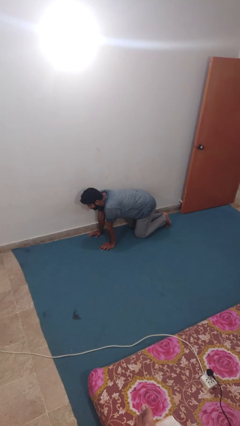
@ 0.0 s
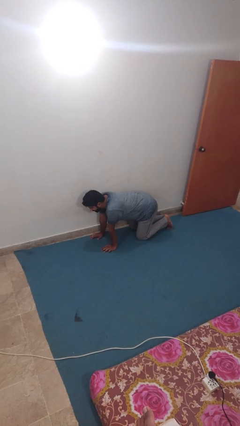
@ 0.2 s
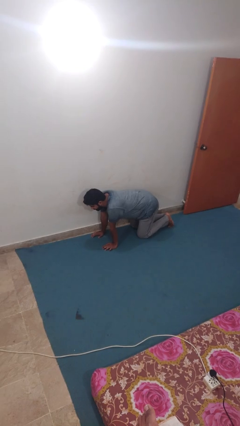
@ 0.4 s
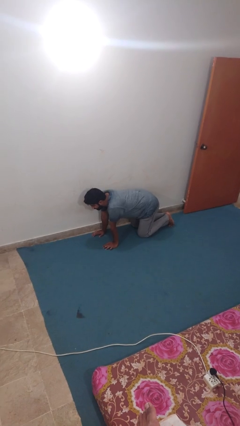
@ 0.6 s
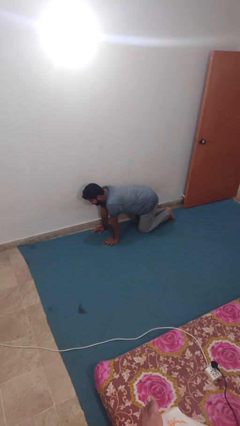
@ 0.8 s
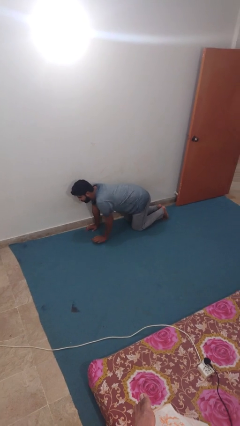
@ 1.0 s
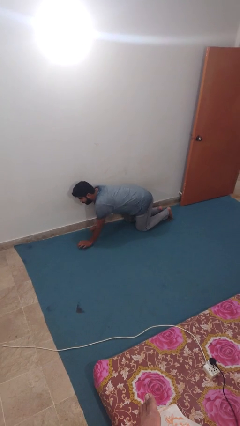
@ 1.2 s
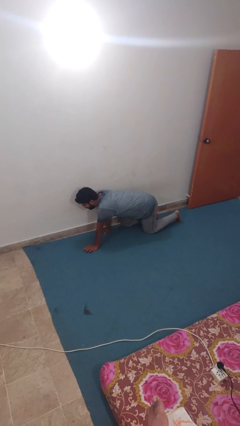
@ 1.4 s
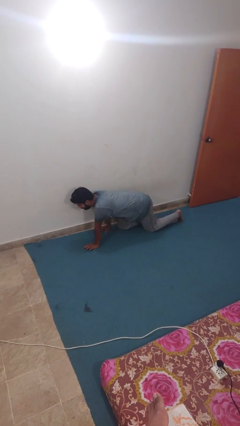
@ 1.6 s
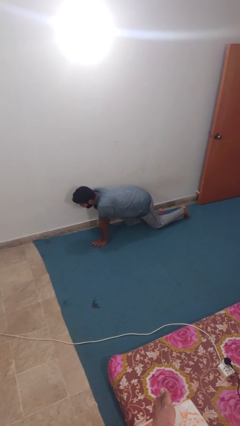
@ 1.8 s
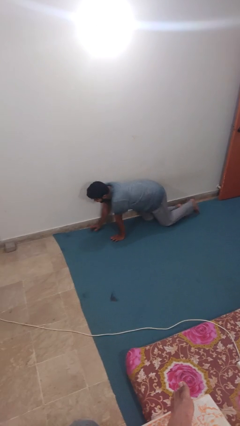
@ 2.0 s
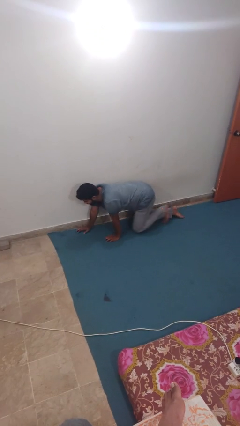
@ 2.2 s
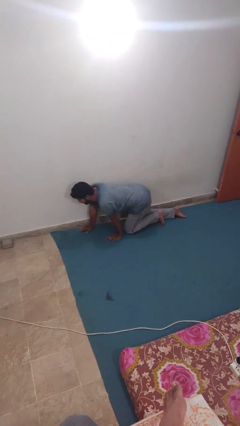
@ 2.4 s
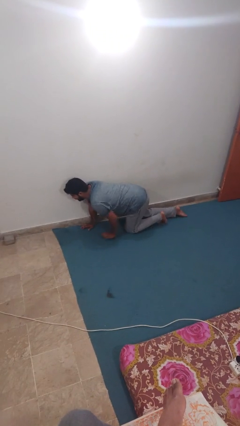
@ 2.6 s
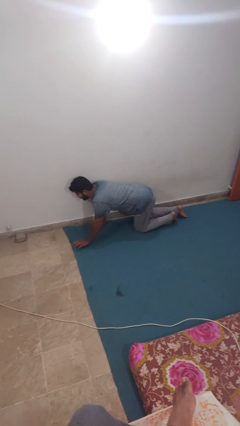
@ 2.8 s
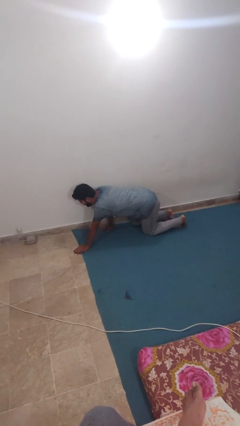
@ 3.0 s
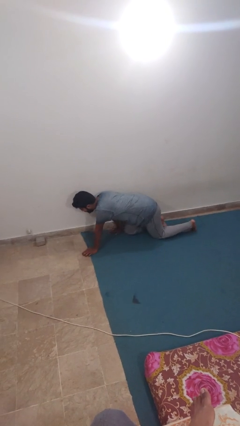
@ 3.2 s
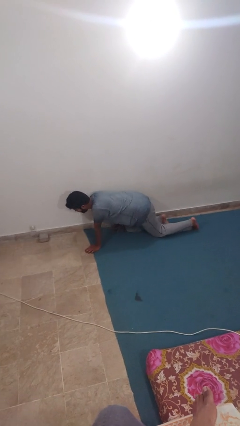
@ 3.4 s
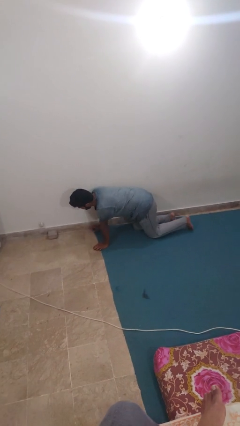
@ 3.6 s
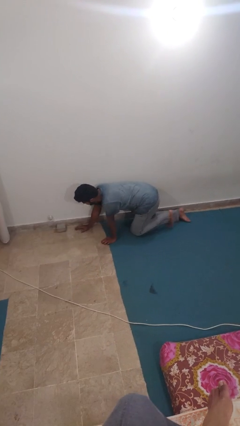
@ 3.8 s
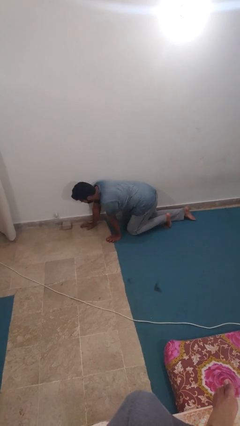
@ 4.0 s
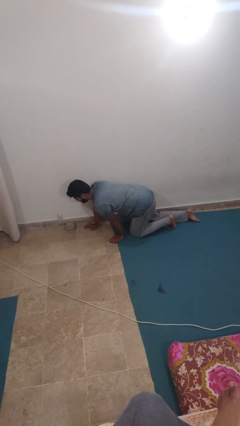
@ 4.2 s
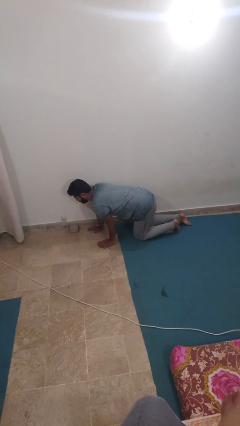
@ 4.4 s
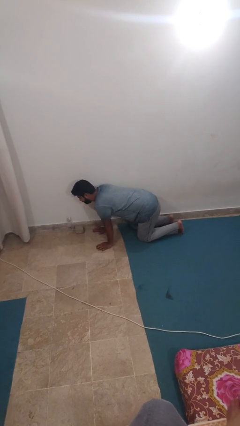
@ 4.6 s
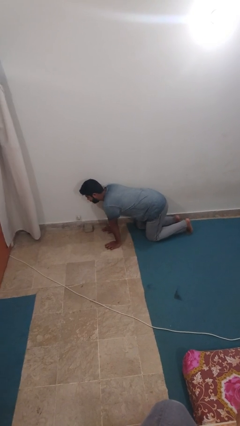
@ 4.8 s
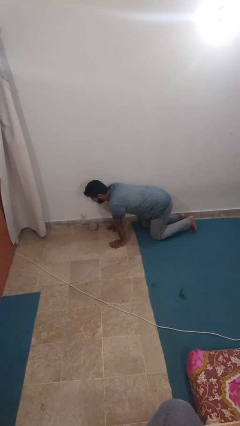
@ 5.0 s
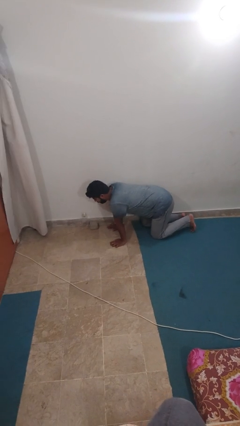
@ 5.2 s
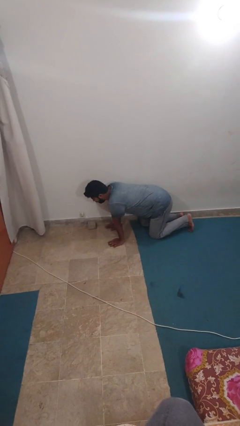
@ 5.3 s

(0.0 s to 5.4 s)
person crawls

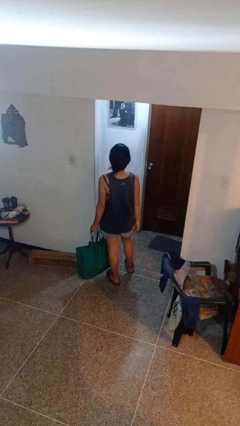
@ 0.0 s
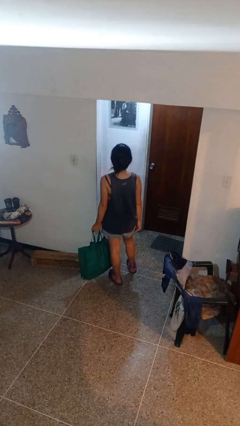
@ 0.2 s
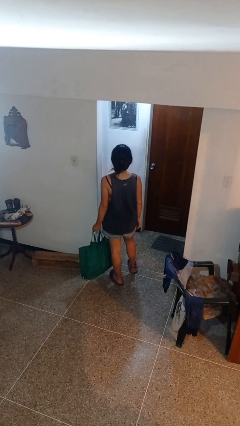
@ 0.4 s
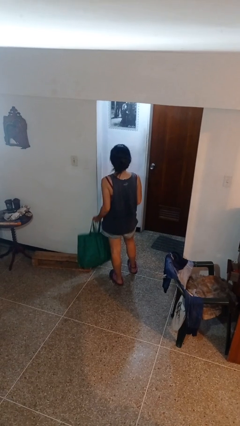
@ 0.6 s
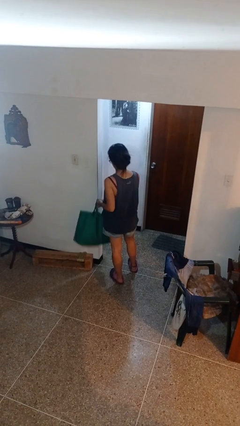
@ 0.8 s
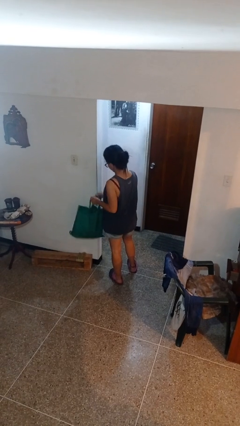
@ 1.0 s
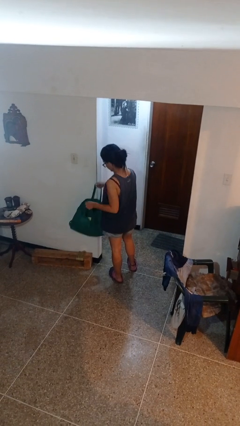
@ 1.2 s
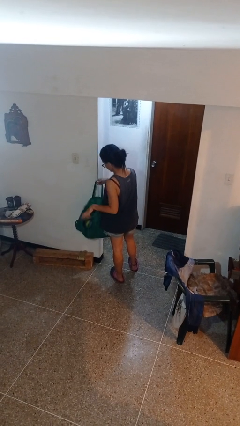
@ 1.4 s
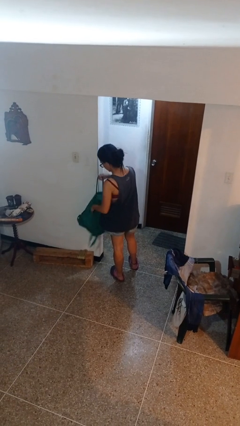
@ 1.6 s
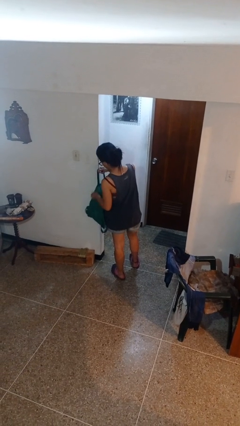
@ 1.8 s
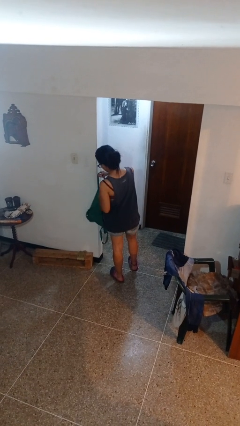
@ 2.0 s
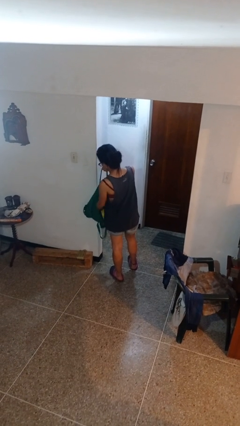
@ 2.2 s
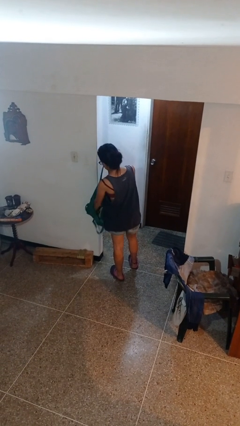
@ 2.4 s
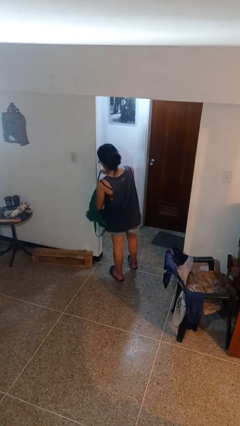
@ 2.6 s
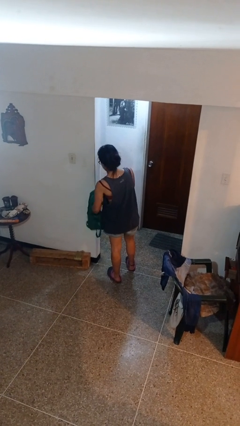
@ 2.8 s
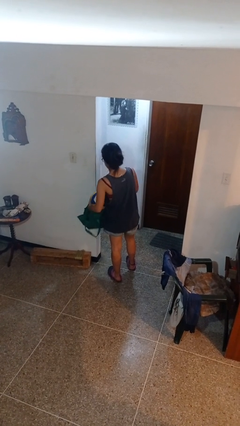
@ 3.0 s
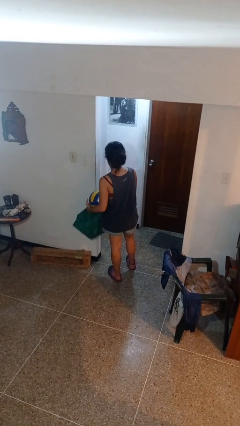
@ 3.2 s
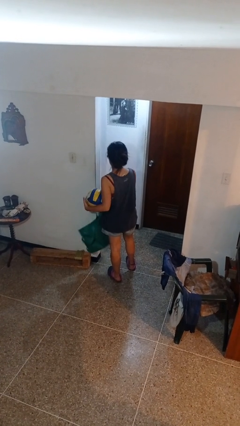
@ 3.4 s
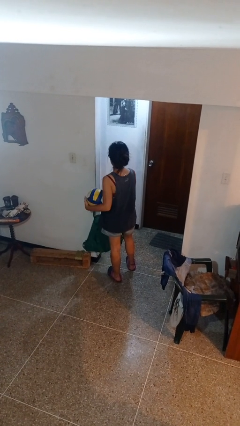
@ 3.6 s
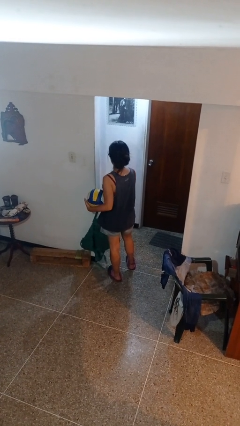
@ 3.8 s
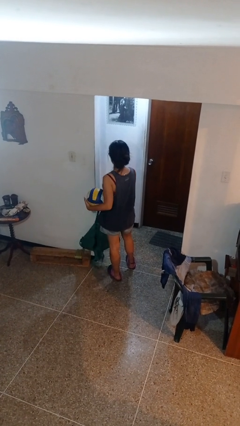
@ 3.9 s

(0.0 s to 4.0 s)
person takes object from bag

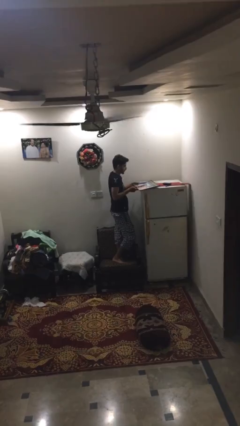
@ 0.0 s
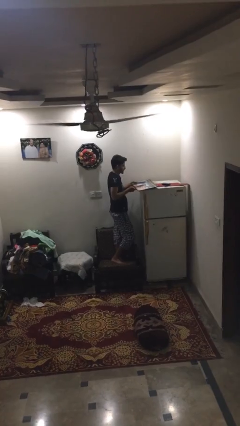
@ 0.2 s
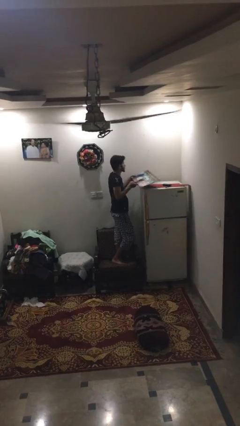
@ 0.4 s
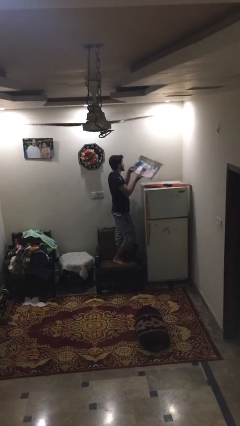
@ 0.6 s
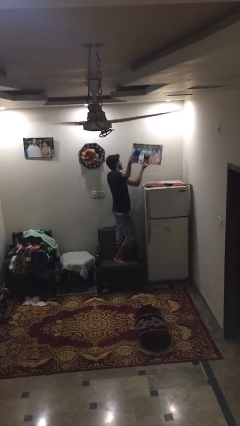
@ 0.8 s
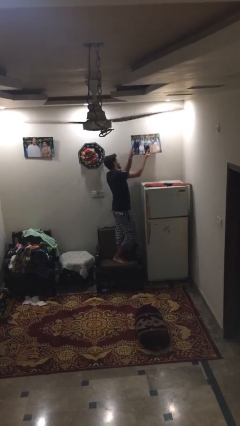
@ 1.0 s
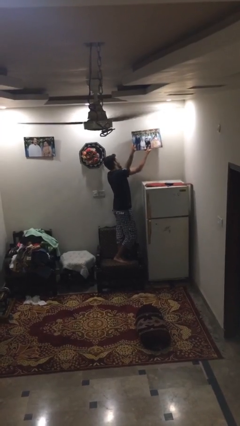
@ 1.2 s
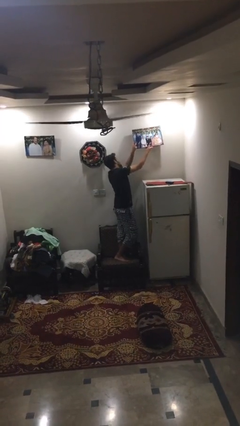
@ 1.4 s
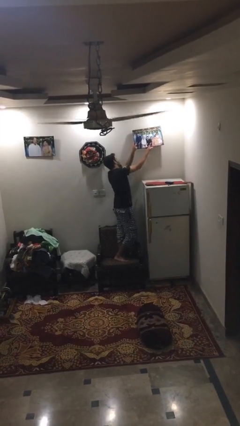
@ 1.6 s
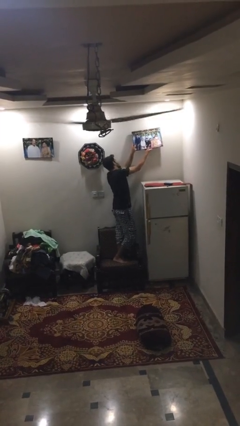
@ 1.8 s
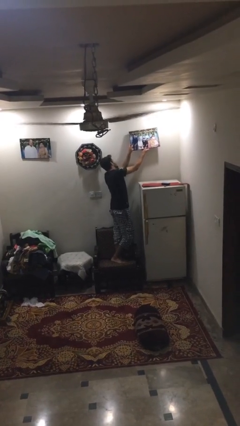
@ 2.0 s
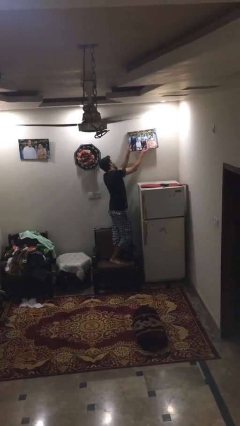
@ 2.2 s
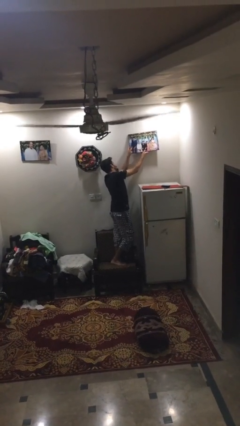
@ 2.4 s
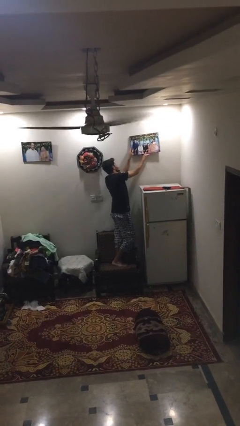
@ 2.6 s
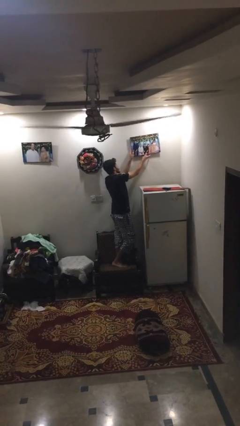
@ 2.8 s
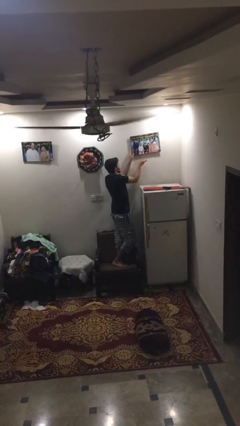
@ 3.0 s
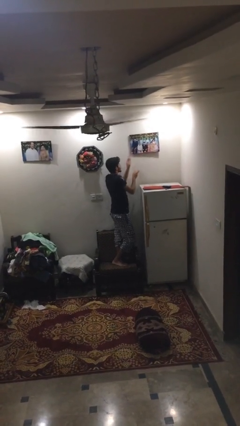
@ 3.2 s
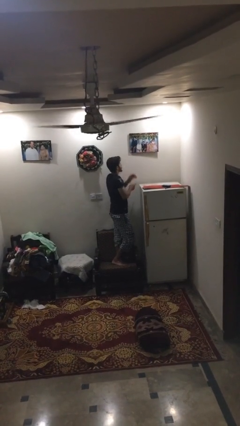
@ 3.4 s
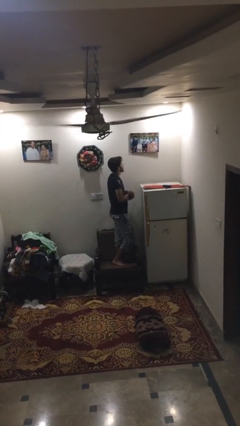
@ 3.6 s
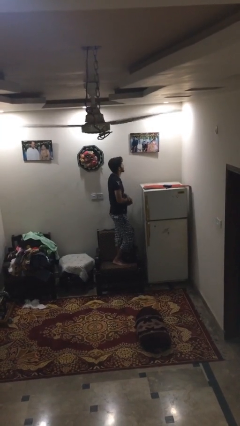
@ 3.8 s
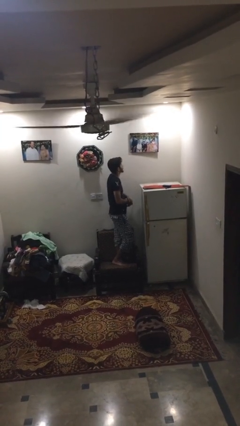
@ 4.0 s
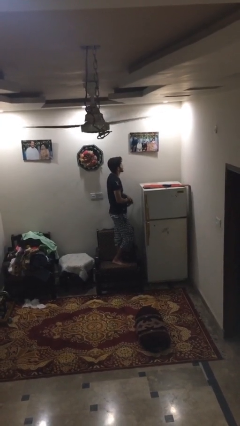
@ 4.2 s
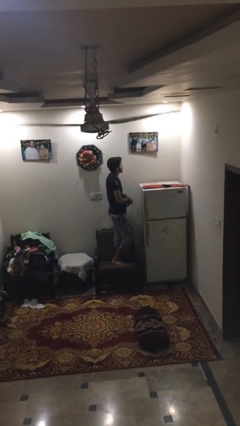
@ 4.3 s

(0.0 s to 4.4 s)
person puts up picture frame

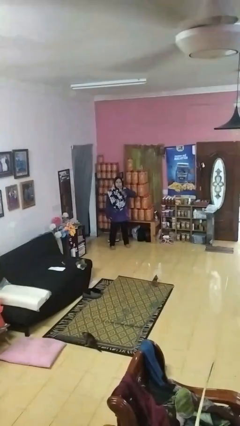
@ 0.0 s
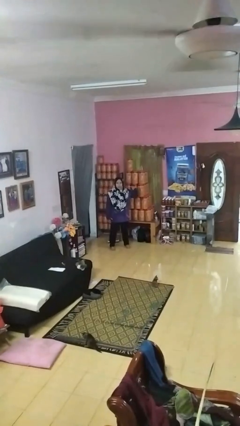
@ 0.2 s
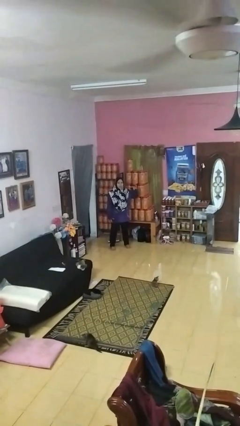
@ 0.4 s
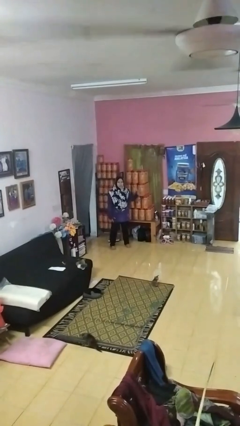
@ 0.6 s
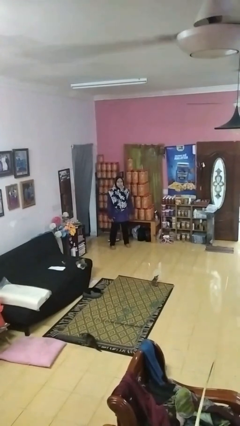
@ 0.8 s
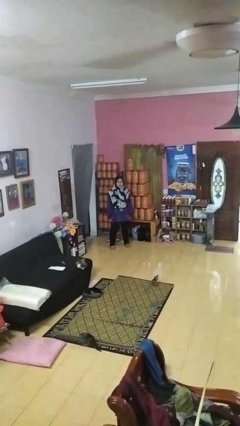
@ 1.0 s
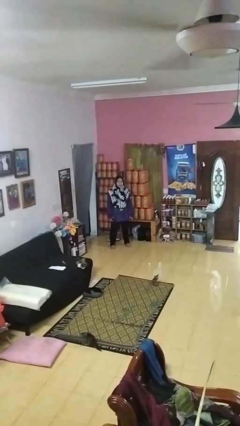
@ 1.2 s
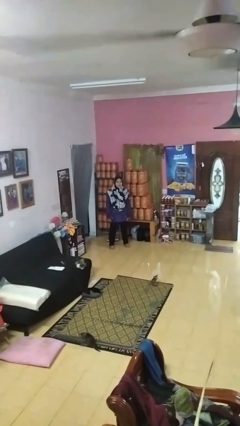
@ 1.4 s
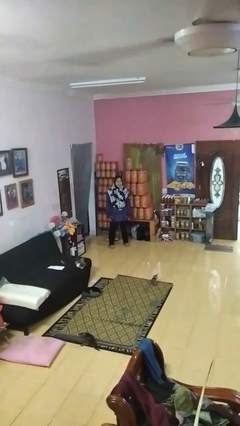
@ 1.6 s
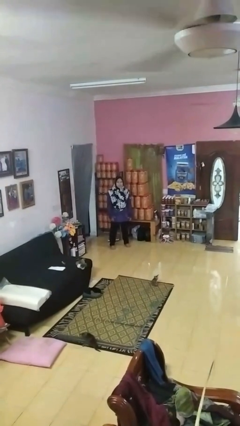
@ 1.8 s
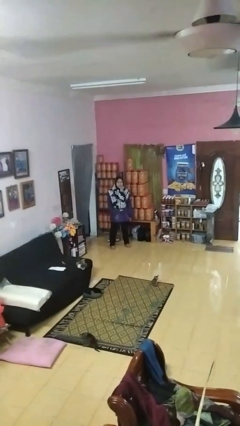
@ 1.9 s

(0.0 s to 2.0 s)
person gestures cut

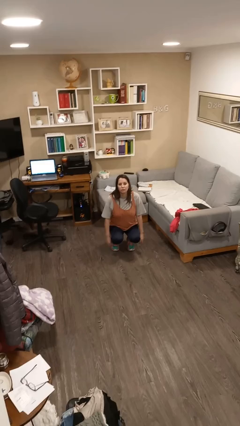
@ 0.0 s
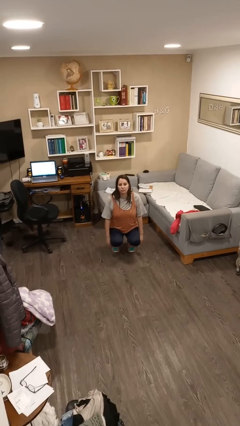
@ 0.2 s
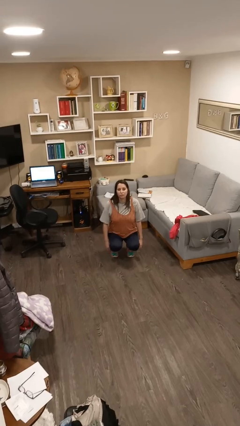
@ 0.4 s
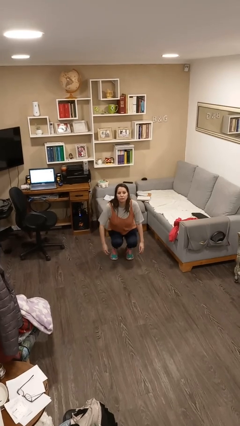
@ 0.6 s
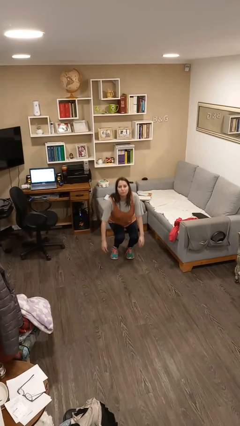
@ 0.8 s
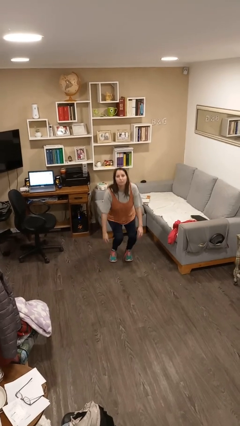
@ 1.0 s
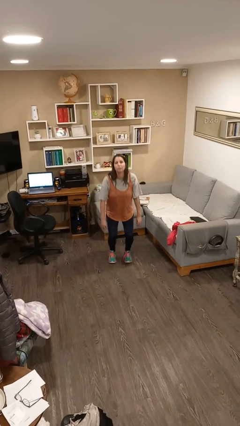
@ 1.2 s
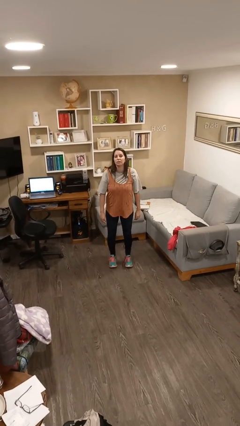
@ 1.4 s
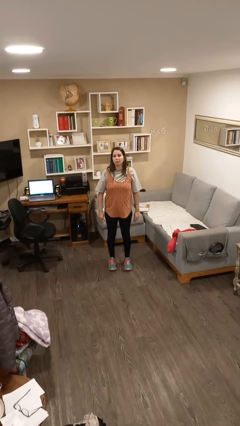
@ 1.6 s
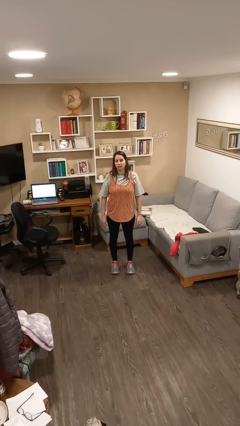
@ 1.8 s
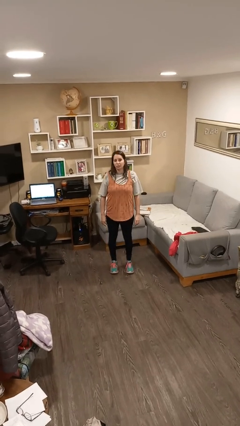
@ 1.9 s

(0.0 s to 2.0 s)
person stands up
